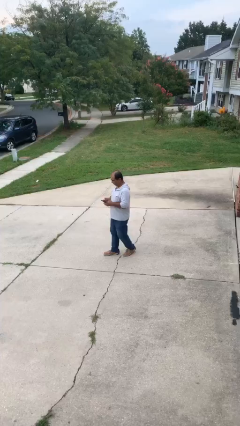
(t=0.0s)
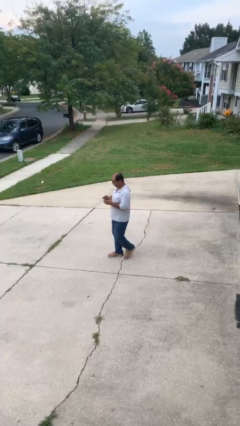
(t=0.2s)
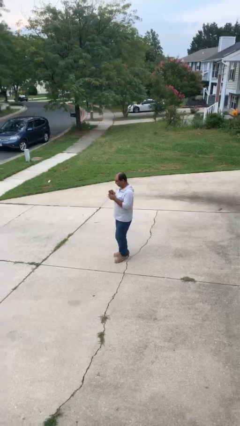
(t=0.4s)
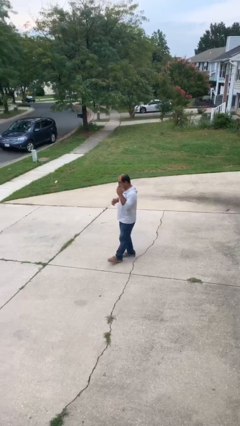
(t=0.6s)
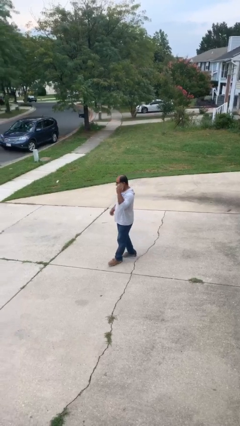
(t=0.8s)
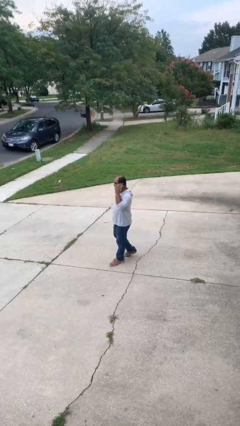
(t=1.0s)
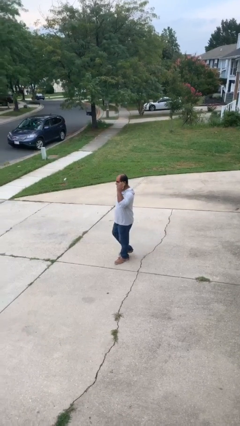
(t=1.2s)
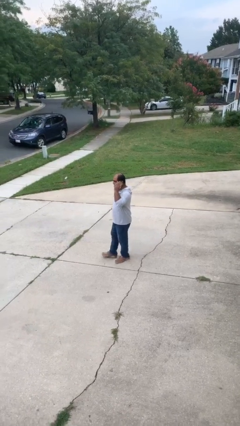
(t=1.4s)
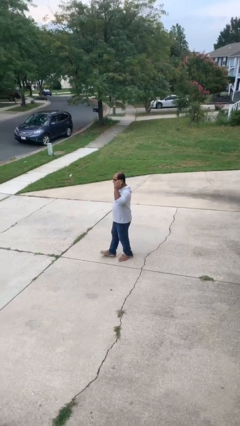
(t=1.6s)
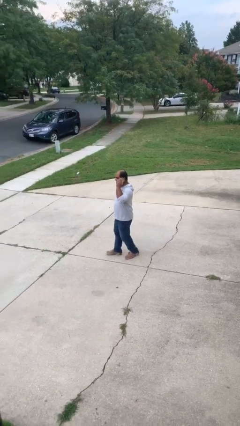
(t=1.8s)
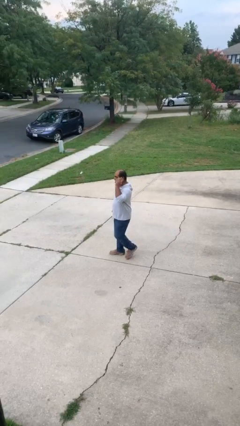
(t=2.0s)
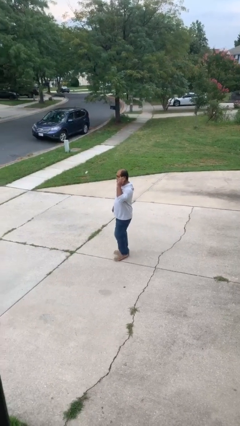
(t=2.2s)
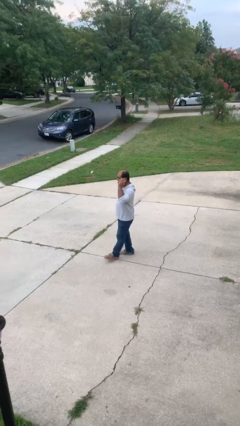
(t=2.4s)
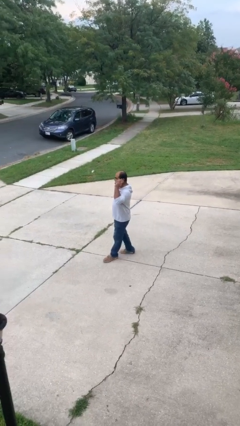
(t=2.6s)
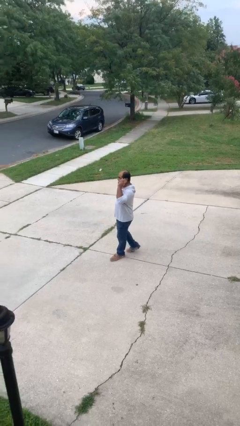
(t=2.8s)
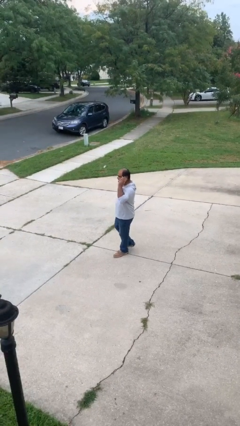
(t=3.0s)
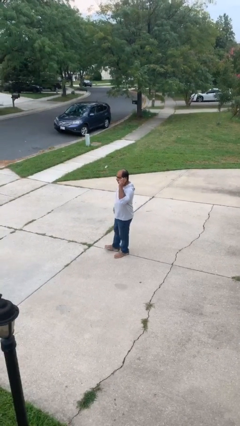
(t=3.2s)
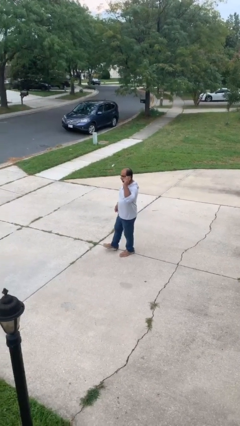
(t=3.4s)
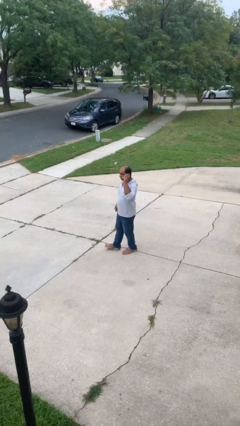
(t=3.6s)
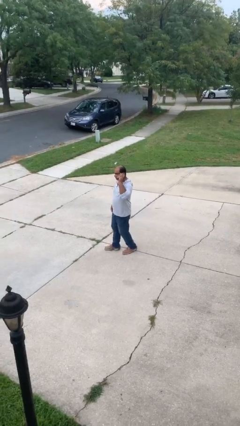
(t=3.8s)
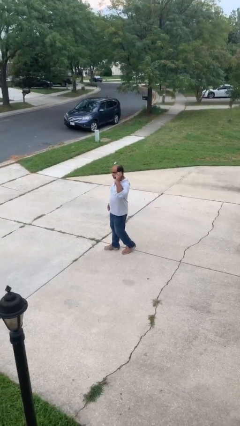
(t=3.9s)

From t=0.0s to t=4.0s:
person talks on phone

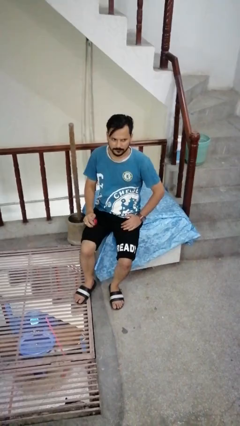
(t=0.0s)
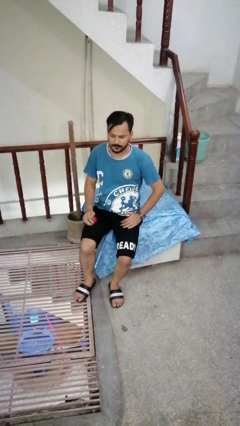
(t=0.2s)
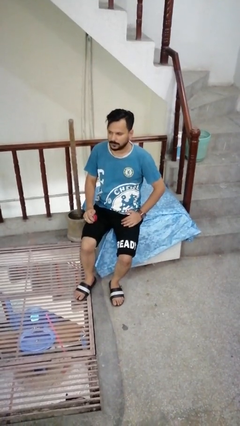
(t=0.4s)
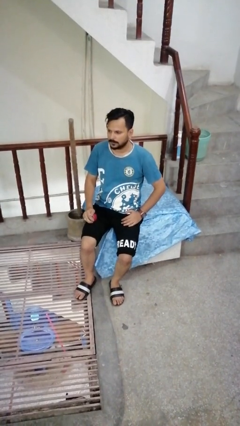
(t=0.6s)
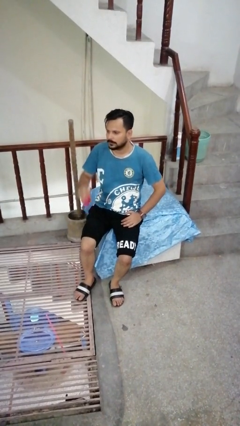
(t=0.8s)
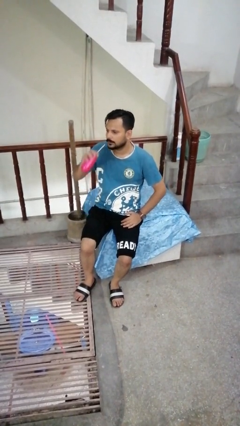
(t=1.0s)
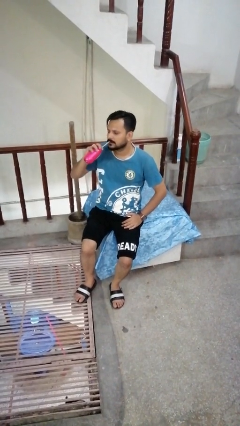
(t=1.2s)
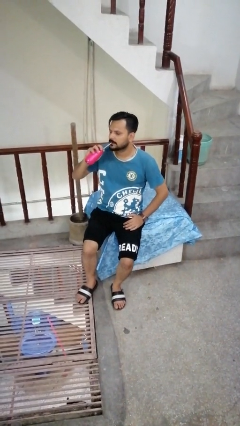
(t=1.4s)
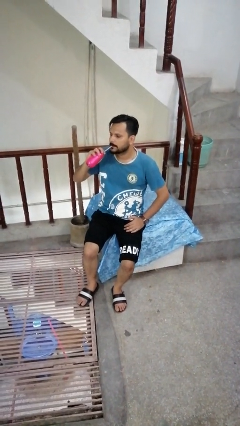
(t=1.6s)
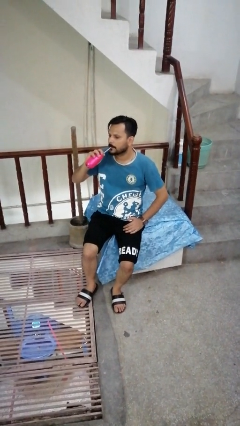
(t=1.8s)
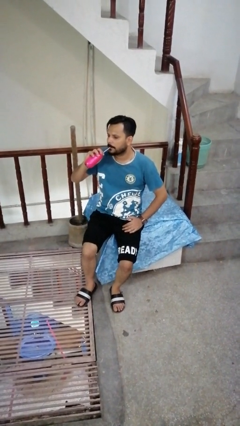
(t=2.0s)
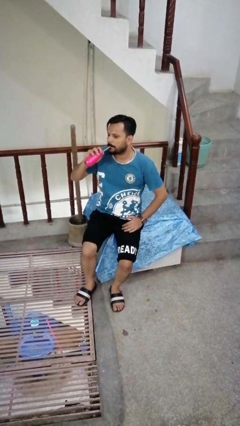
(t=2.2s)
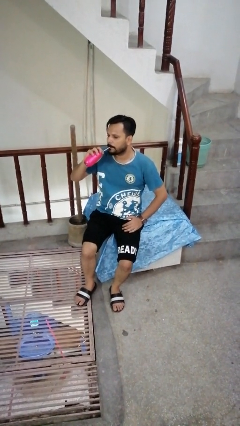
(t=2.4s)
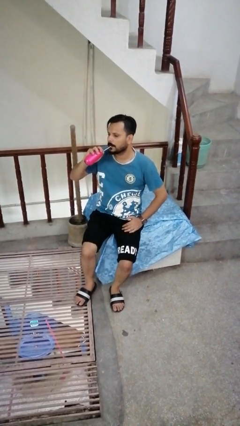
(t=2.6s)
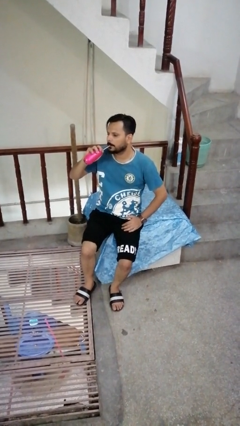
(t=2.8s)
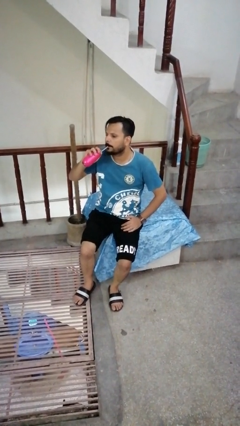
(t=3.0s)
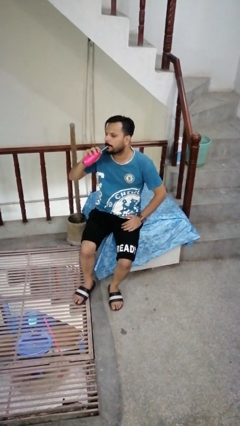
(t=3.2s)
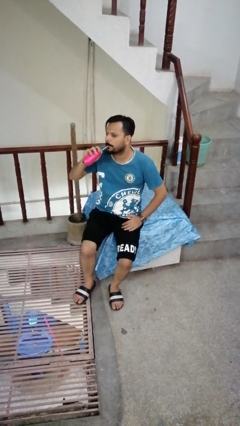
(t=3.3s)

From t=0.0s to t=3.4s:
person drinks from straw

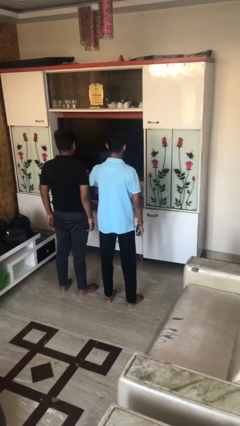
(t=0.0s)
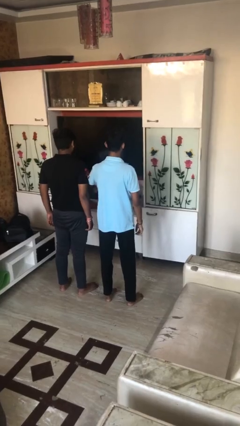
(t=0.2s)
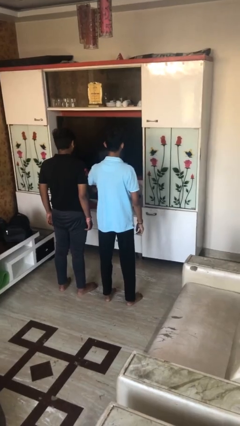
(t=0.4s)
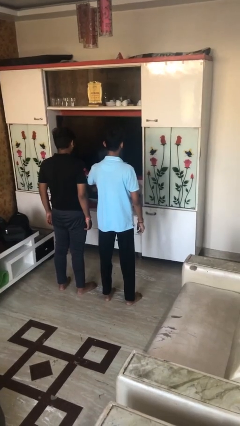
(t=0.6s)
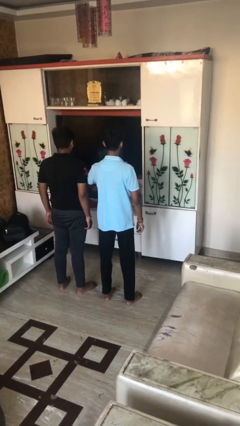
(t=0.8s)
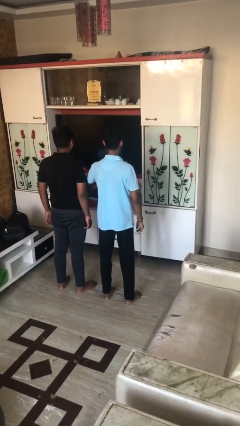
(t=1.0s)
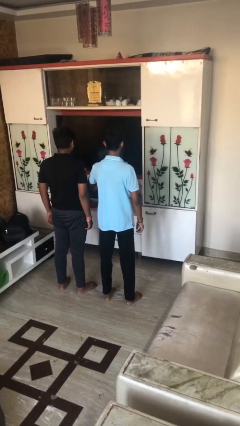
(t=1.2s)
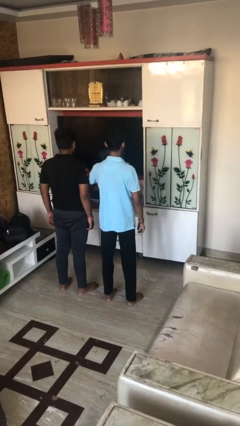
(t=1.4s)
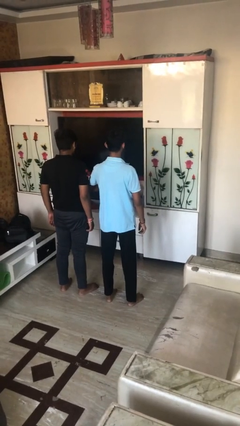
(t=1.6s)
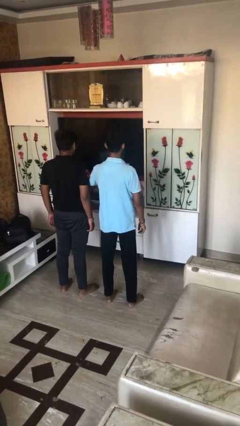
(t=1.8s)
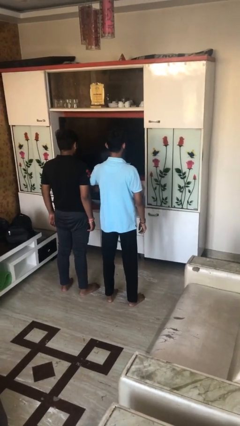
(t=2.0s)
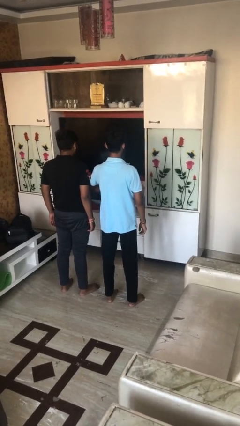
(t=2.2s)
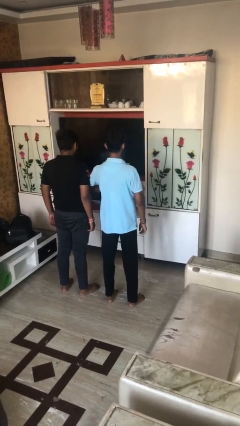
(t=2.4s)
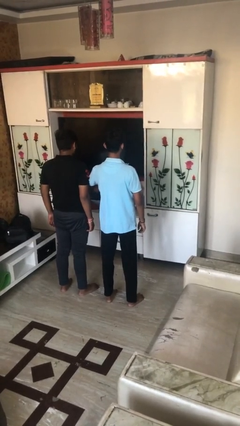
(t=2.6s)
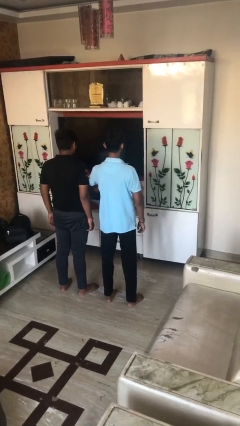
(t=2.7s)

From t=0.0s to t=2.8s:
person nudges person with elbow

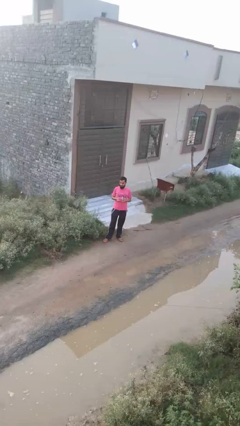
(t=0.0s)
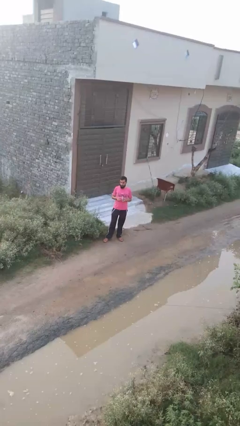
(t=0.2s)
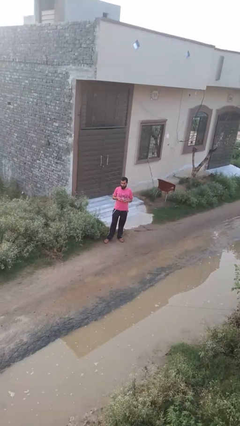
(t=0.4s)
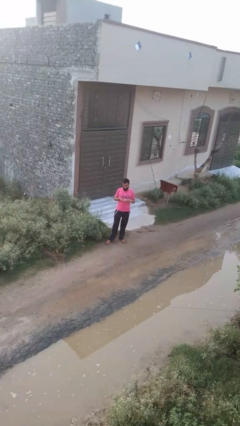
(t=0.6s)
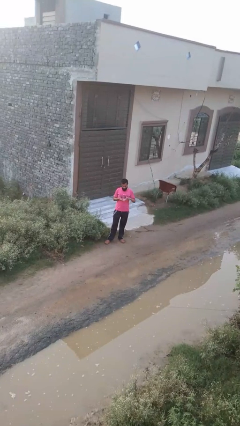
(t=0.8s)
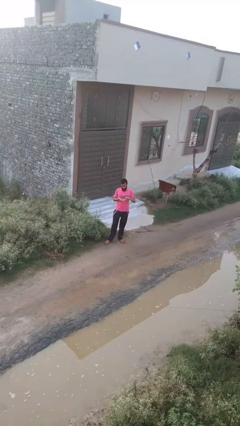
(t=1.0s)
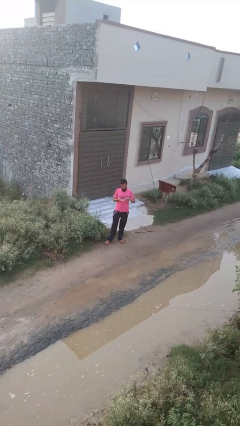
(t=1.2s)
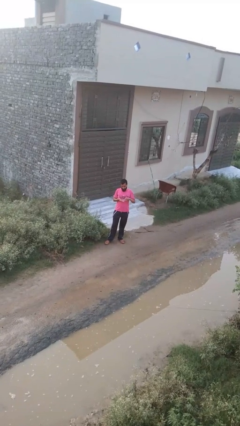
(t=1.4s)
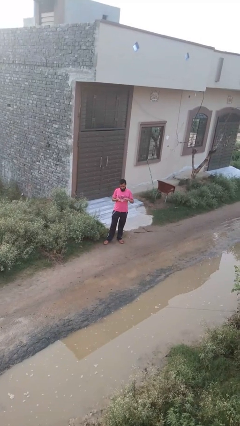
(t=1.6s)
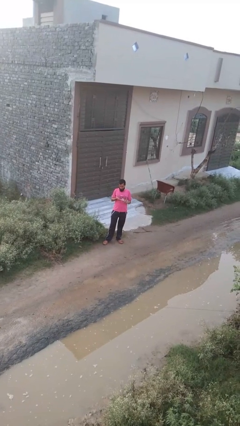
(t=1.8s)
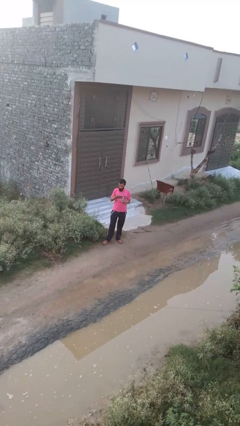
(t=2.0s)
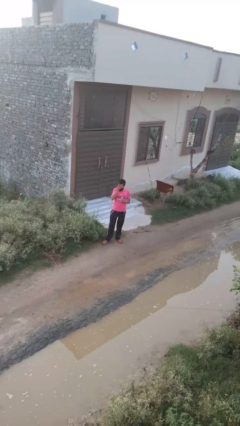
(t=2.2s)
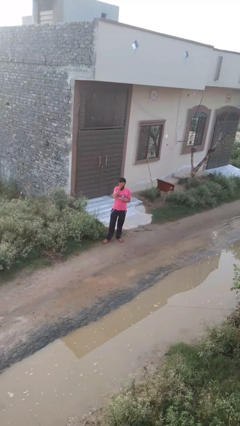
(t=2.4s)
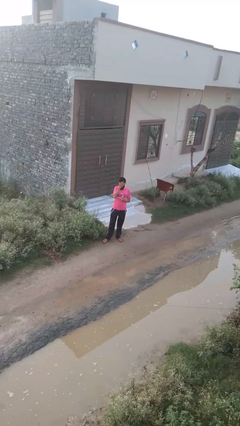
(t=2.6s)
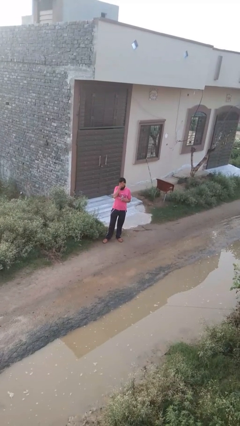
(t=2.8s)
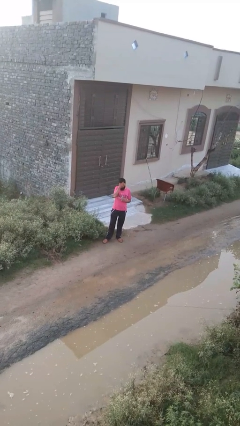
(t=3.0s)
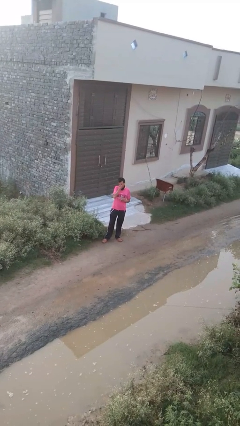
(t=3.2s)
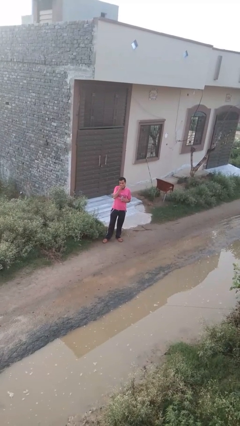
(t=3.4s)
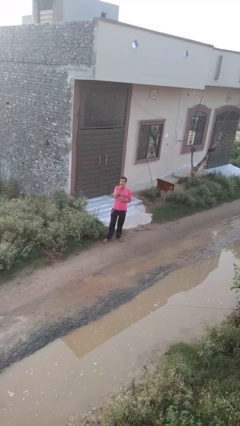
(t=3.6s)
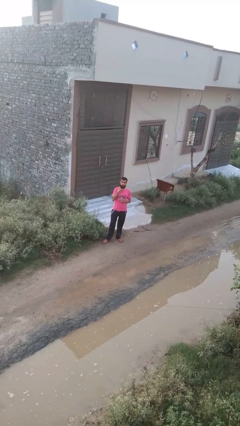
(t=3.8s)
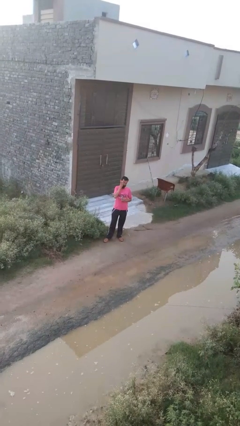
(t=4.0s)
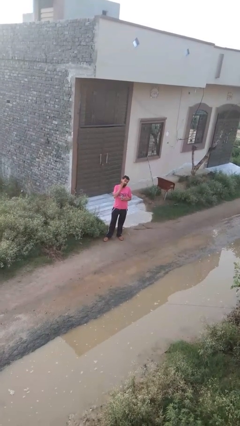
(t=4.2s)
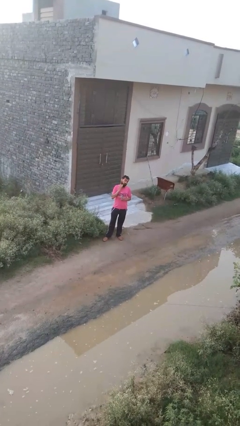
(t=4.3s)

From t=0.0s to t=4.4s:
person applies facial moisturizer

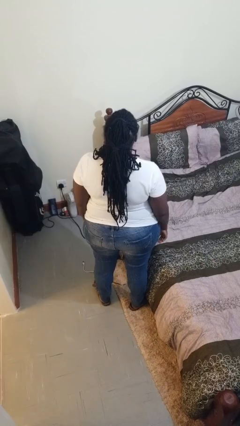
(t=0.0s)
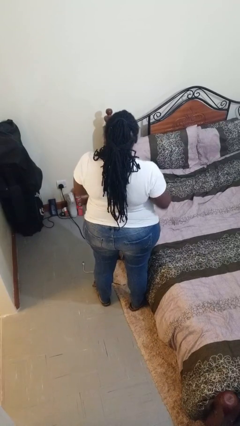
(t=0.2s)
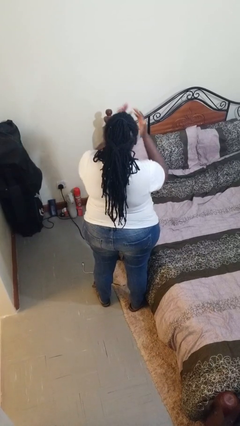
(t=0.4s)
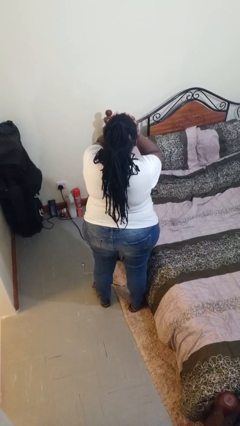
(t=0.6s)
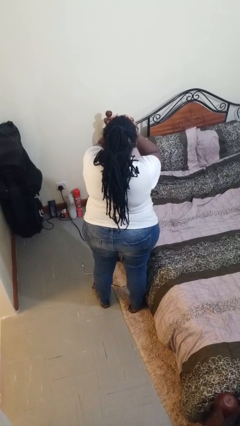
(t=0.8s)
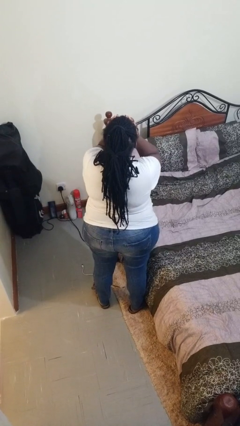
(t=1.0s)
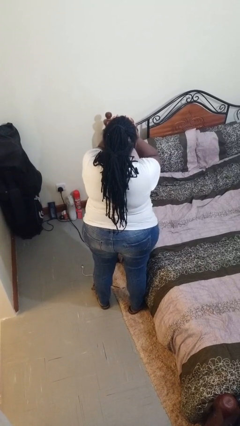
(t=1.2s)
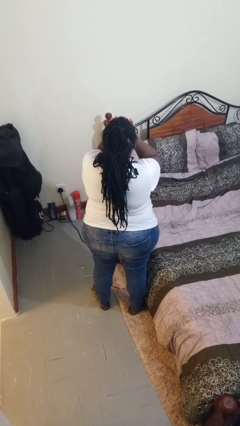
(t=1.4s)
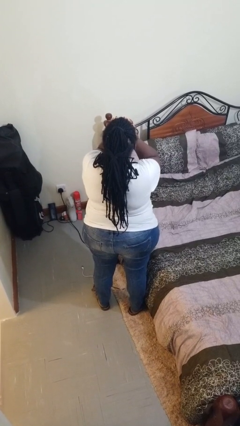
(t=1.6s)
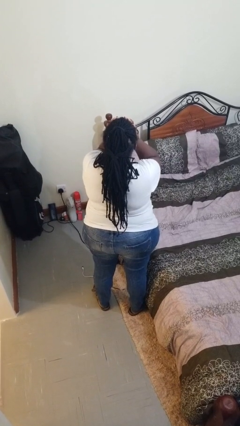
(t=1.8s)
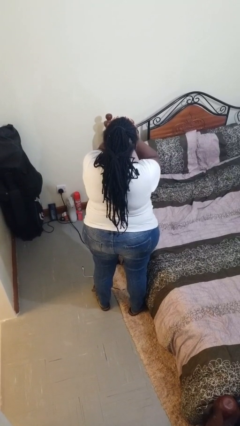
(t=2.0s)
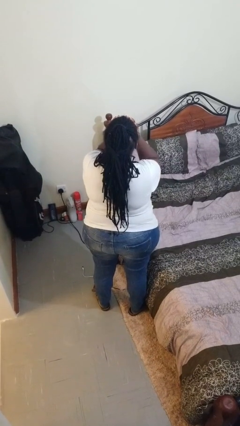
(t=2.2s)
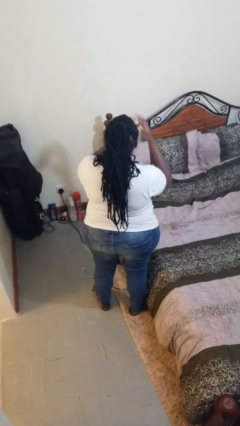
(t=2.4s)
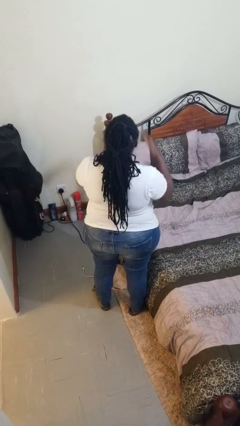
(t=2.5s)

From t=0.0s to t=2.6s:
person covers face with hands

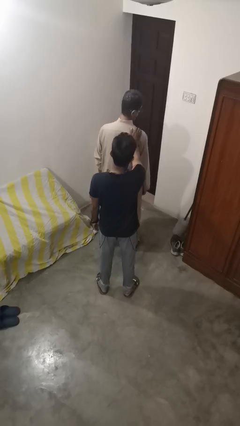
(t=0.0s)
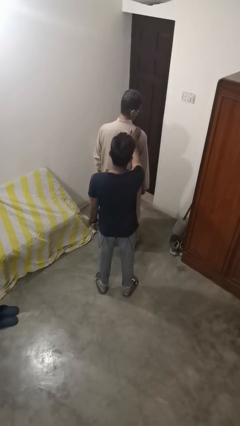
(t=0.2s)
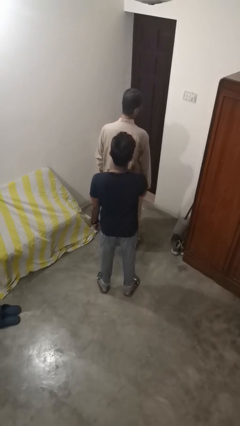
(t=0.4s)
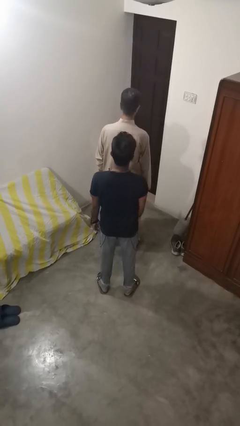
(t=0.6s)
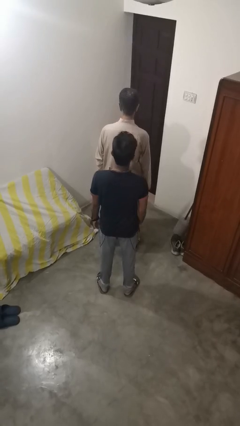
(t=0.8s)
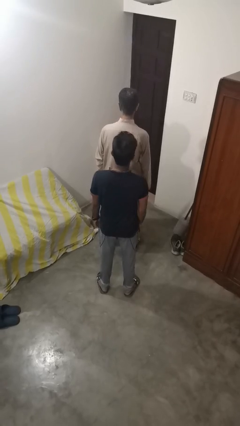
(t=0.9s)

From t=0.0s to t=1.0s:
person spins person around
